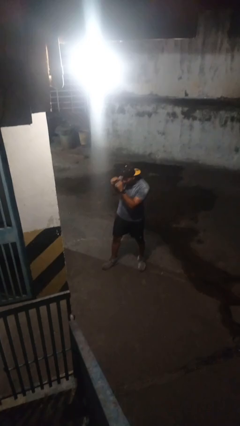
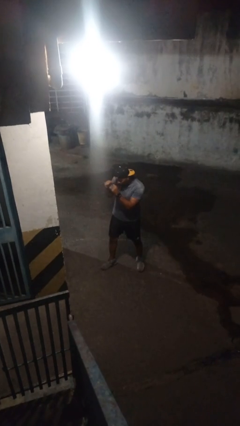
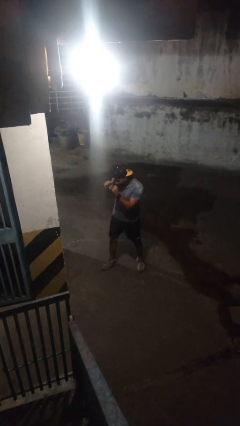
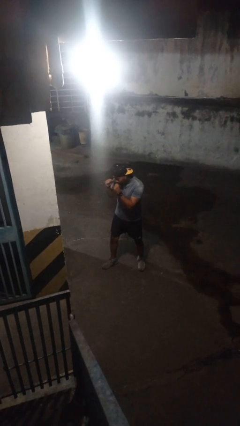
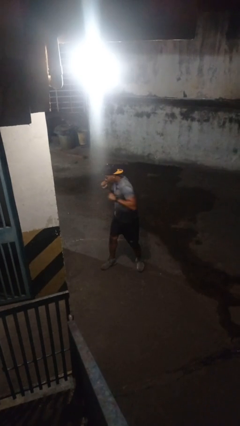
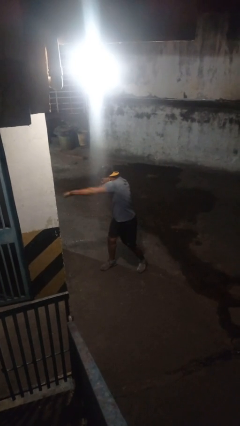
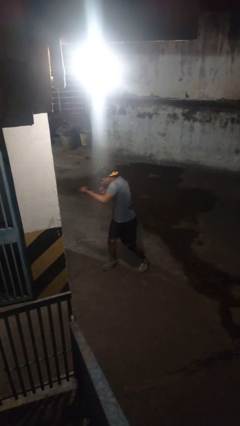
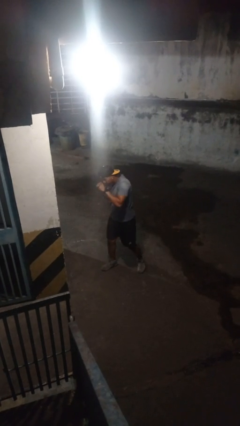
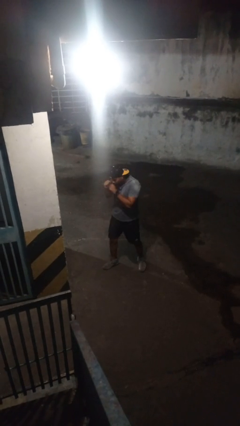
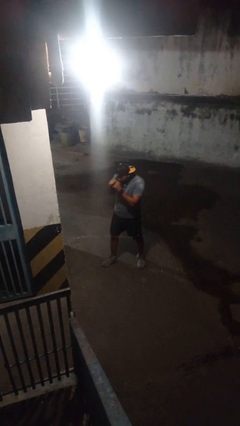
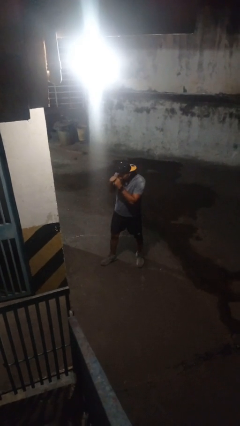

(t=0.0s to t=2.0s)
person punches

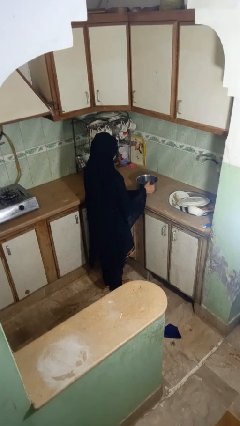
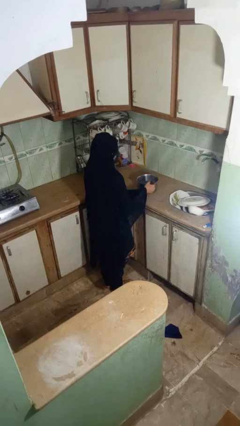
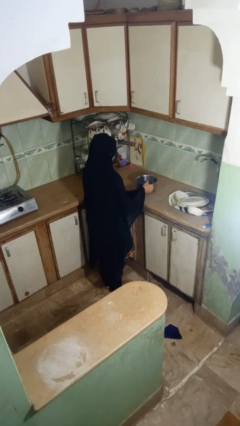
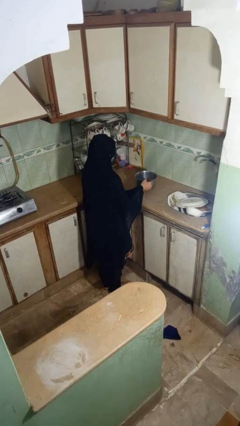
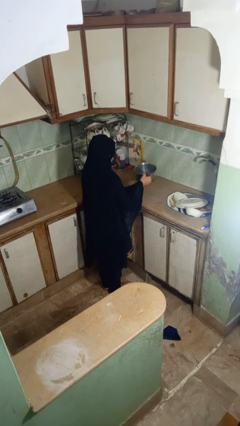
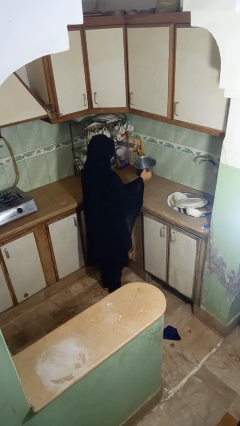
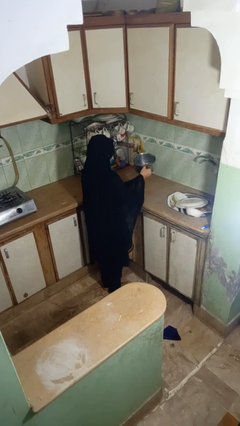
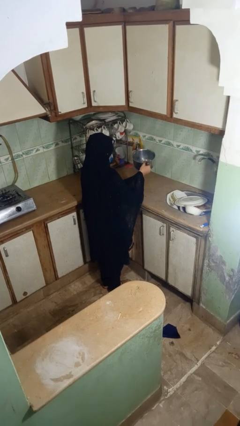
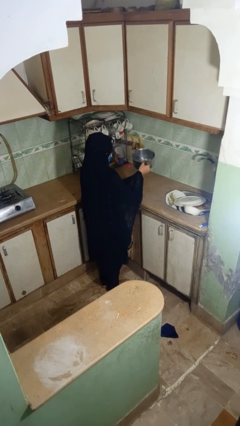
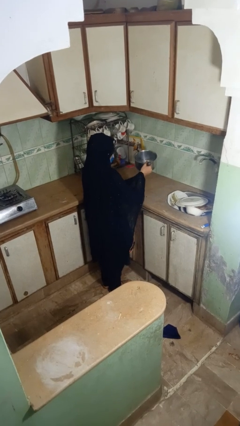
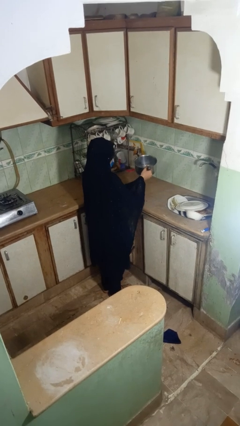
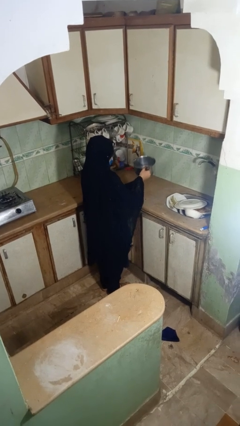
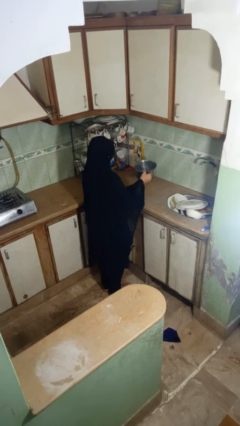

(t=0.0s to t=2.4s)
person picks up object from countertop

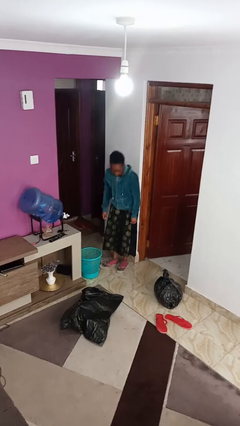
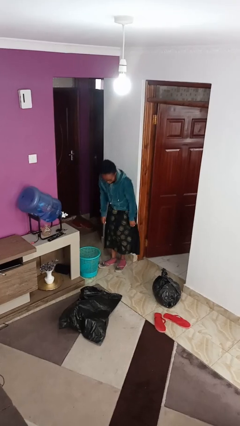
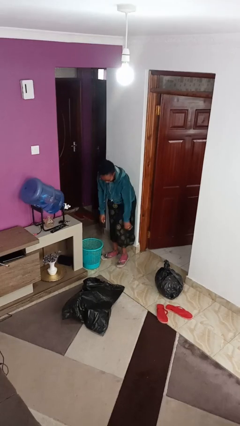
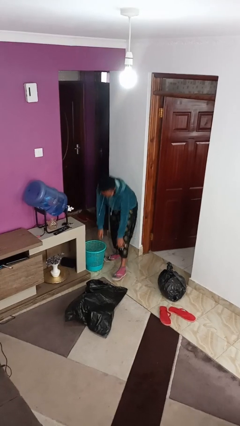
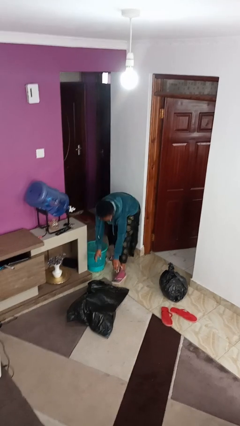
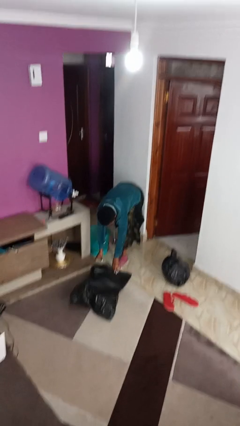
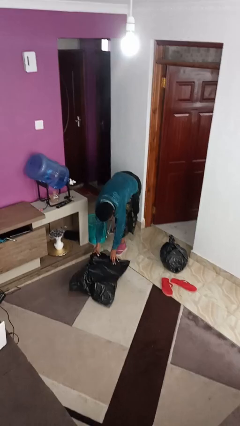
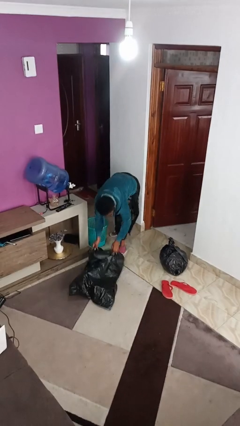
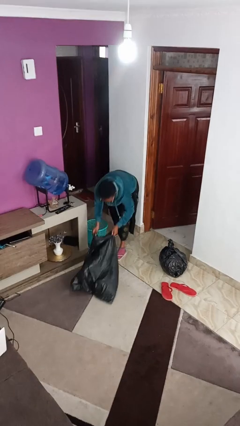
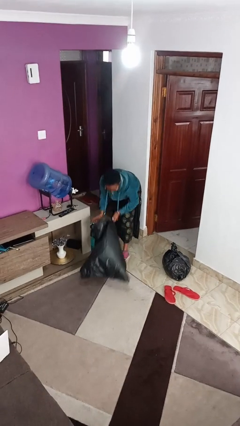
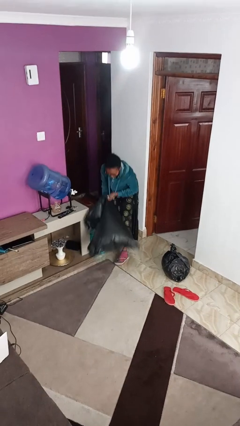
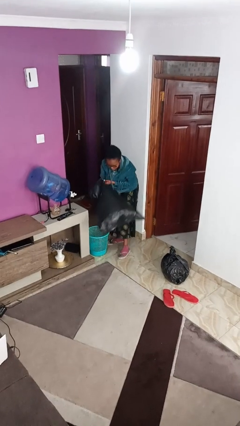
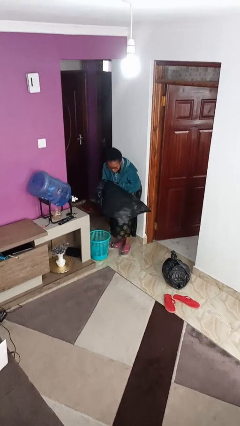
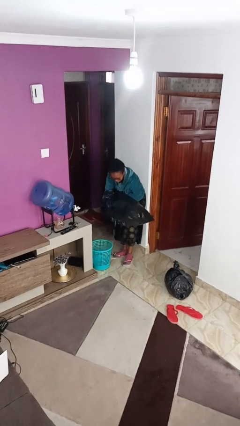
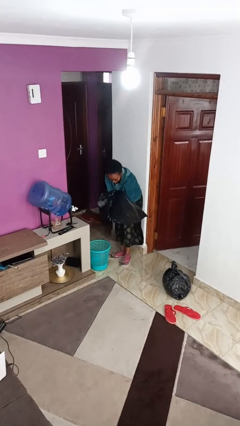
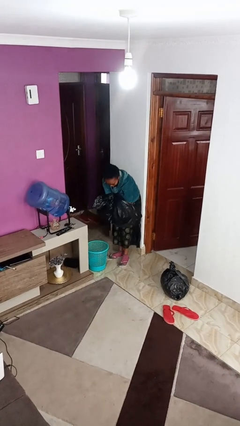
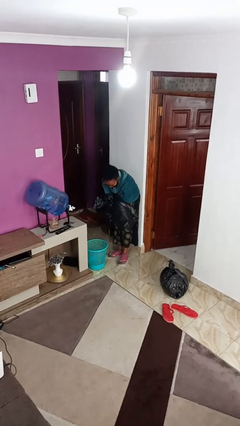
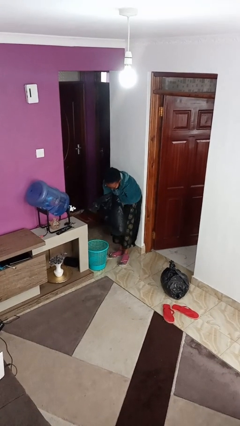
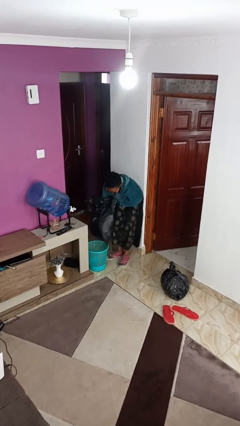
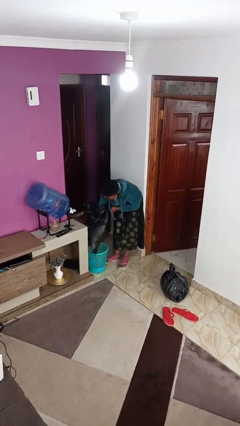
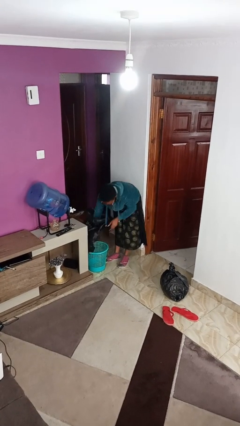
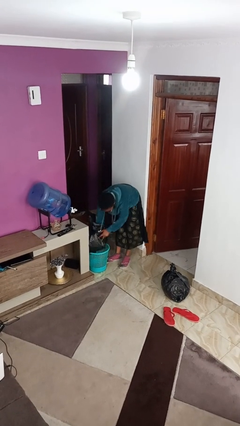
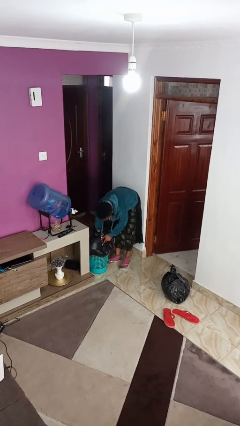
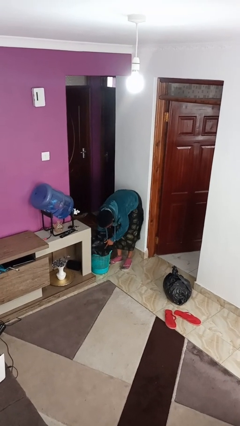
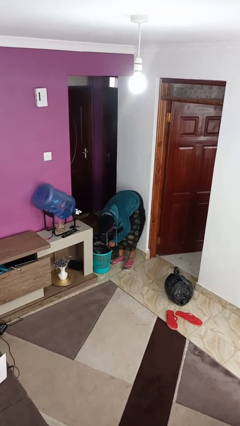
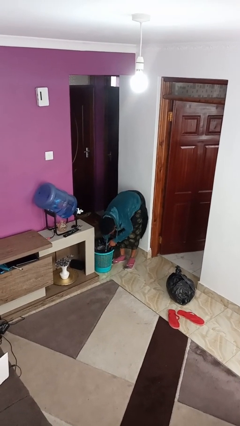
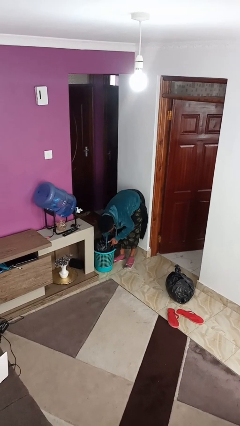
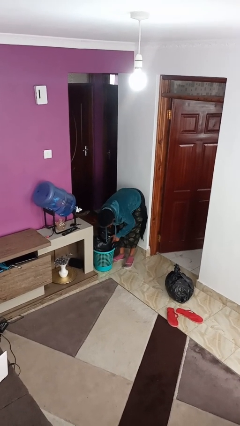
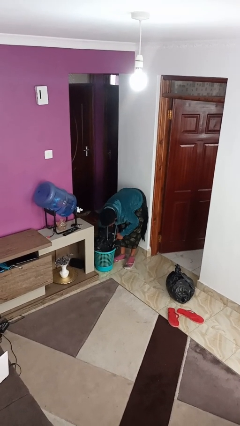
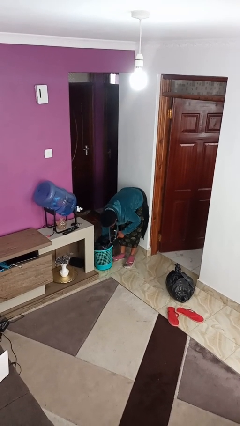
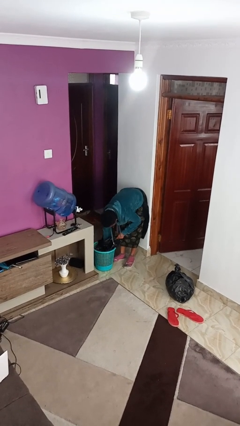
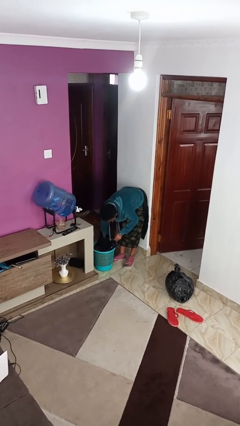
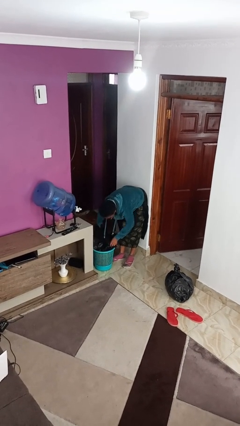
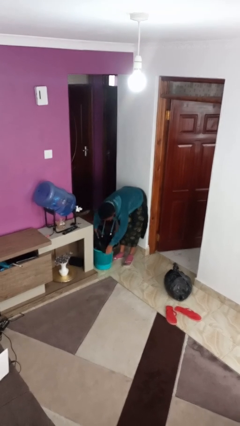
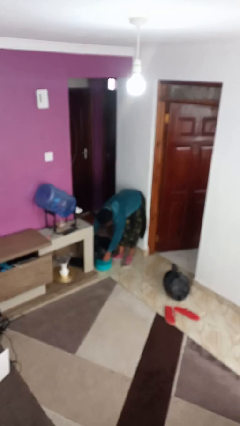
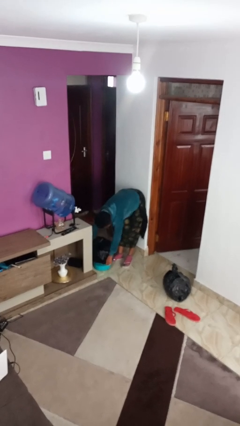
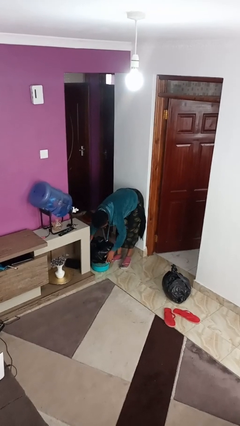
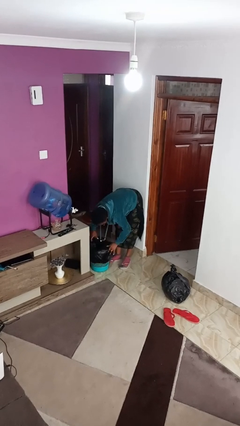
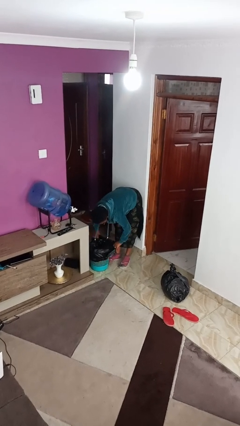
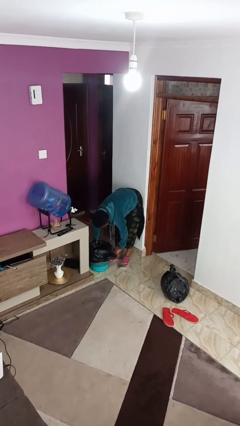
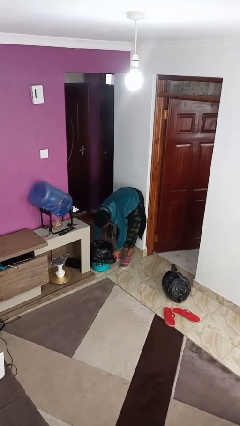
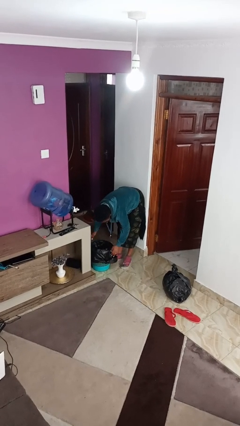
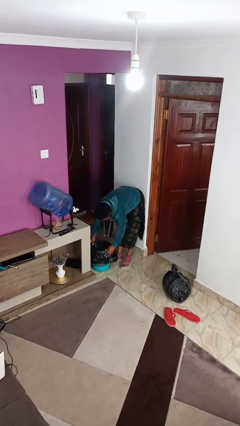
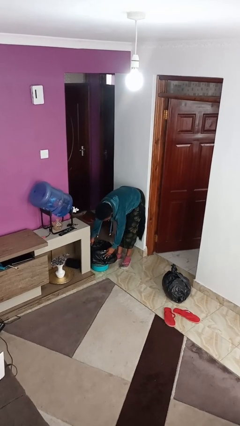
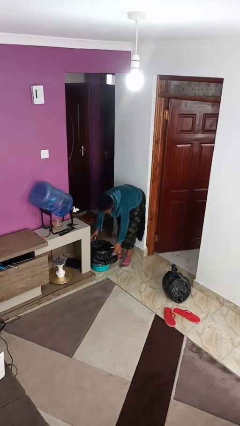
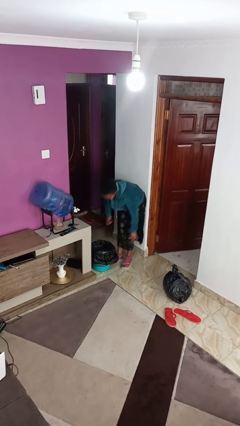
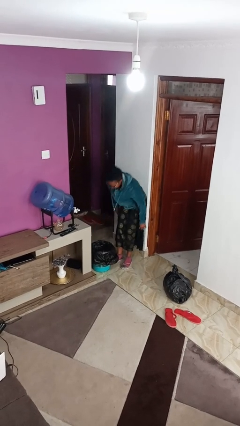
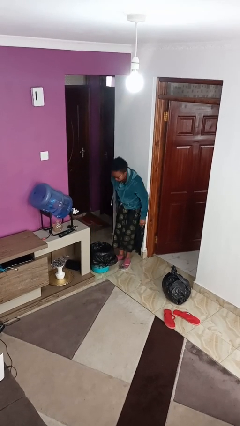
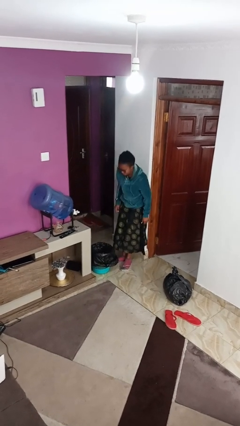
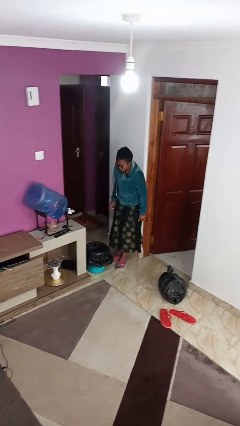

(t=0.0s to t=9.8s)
person inserts trashbag into trashcan

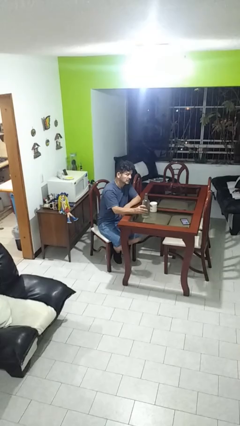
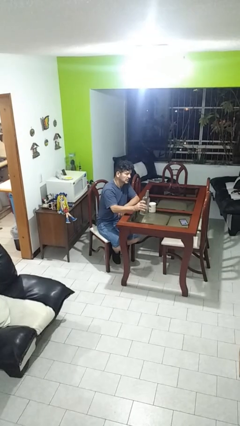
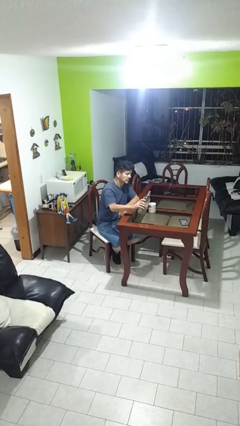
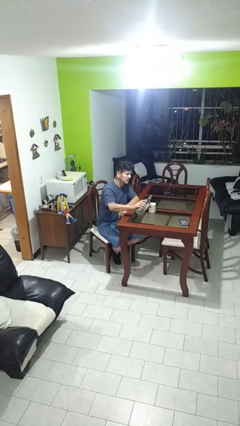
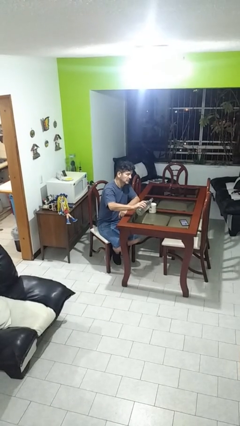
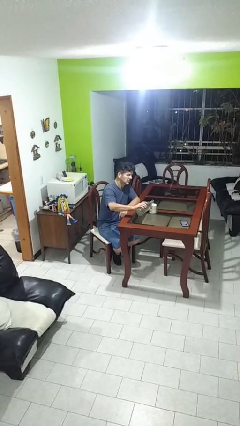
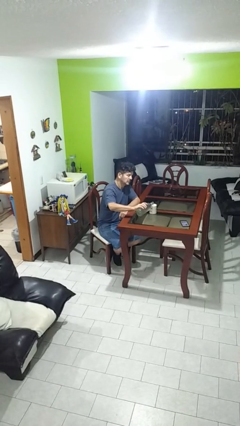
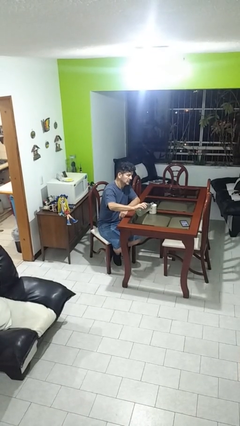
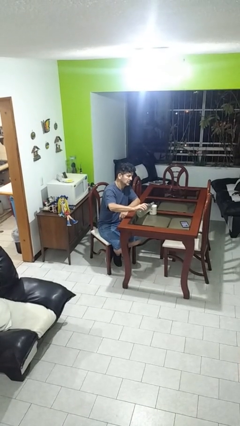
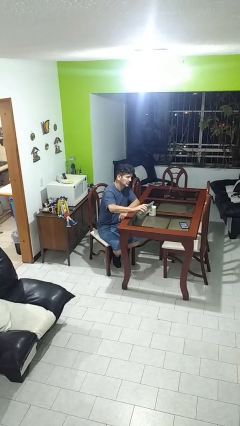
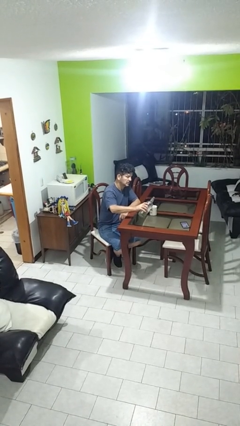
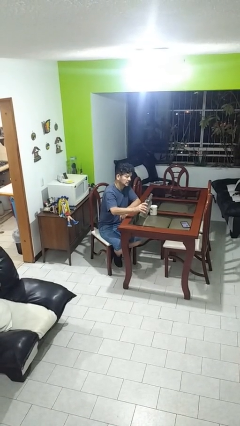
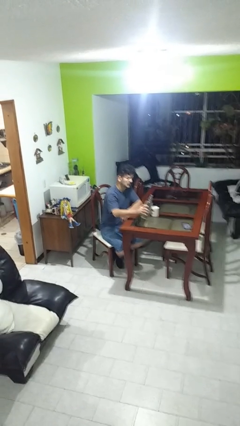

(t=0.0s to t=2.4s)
person pours liquid into cup

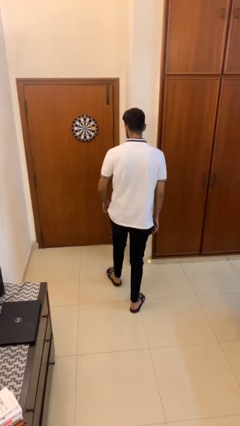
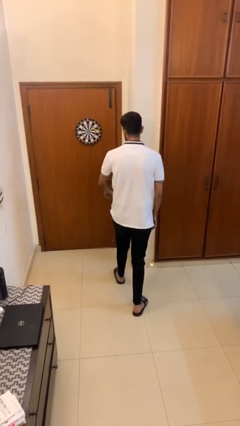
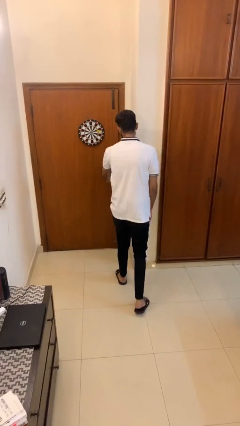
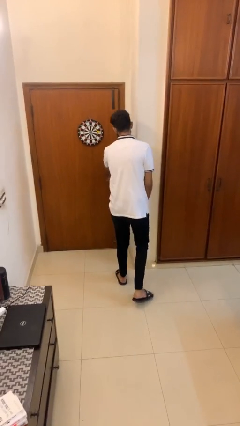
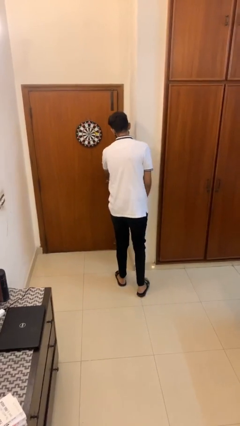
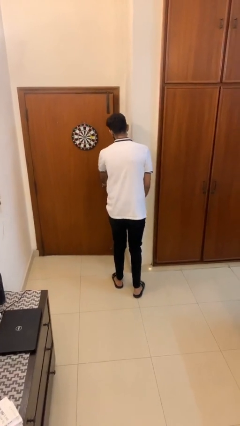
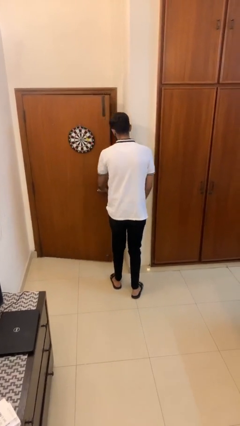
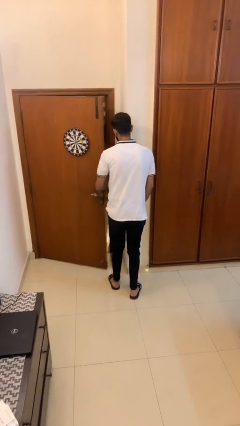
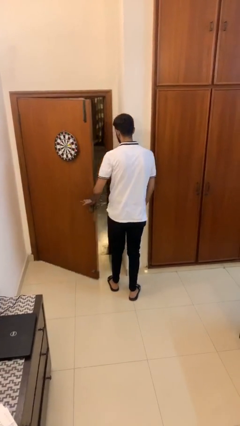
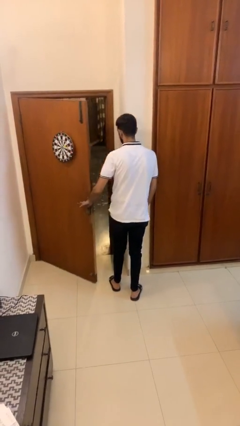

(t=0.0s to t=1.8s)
person opens facility door
